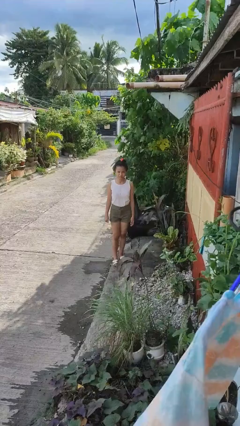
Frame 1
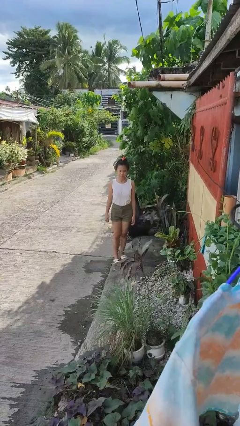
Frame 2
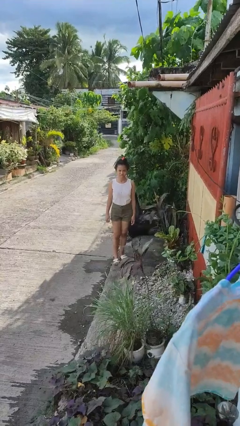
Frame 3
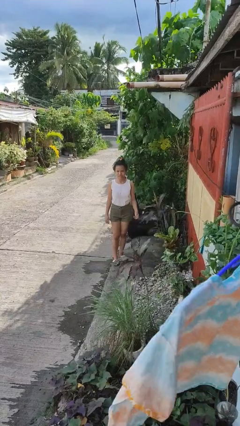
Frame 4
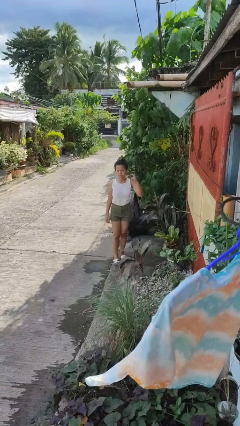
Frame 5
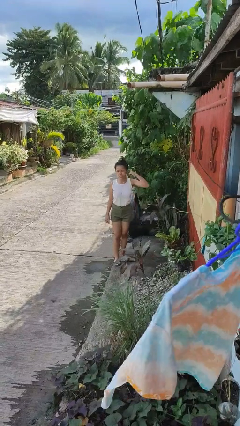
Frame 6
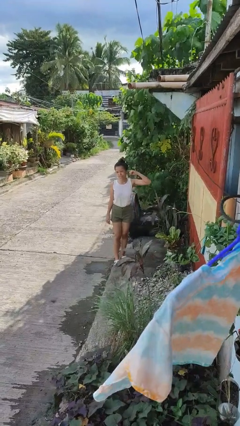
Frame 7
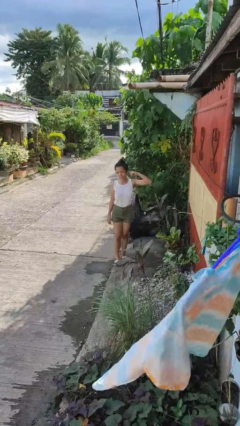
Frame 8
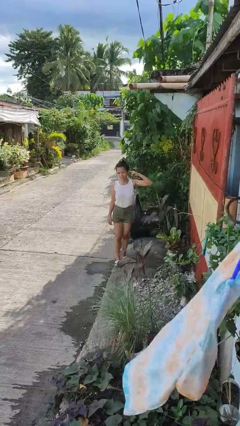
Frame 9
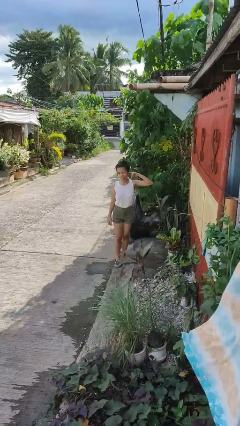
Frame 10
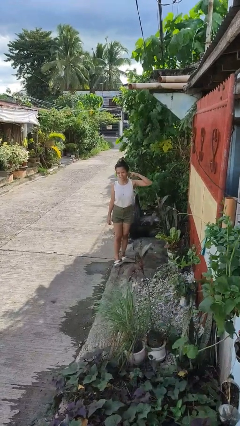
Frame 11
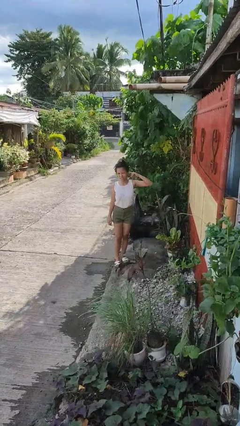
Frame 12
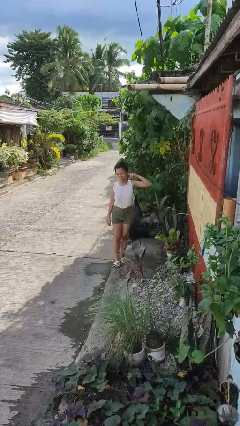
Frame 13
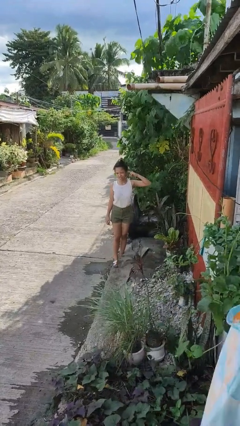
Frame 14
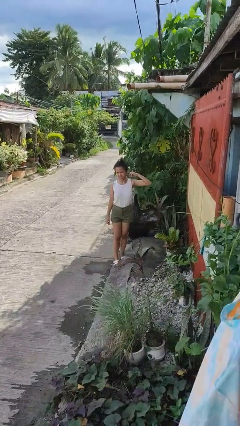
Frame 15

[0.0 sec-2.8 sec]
person touches earlobe

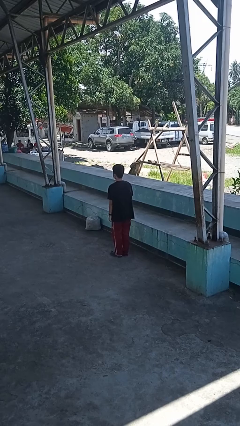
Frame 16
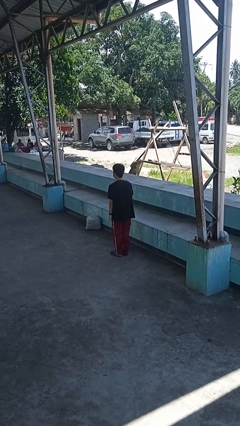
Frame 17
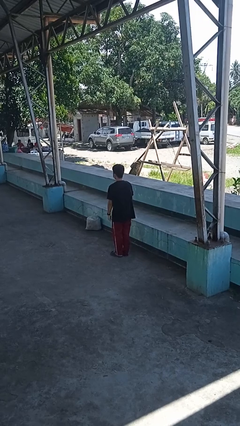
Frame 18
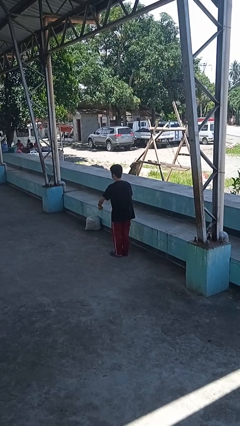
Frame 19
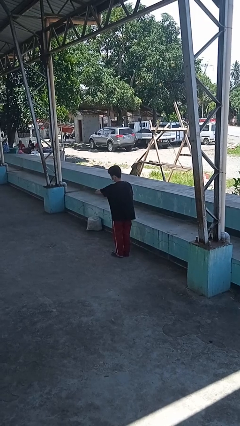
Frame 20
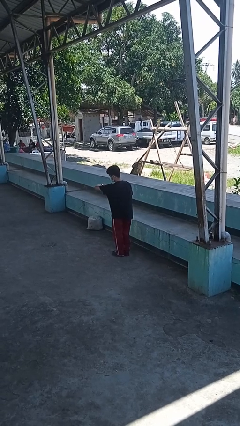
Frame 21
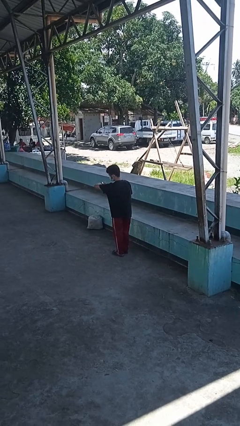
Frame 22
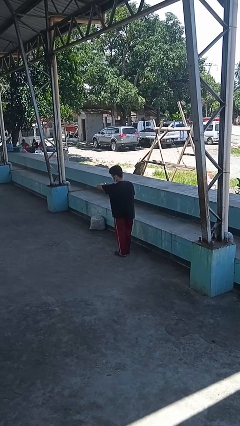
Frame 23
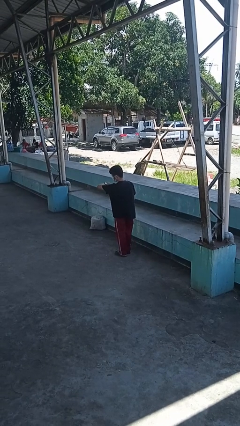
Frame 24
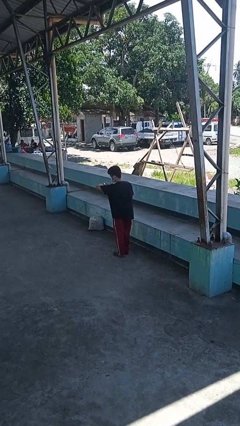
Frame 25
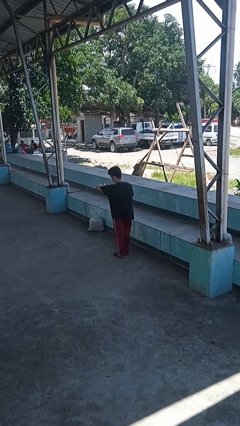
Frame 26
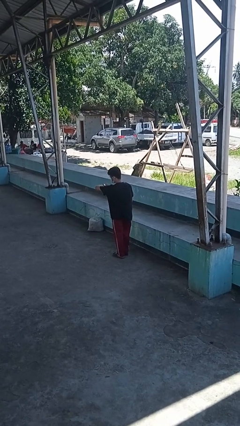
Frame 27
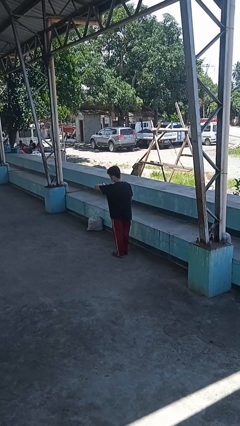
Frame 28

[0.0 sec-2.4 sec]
person looks at wristwatch

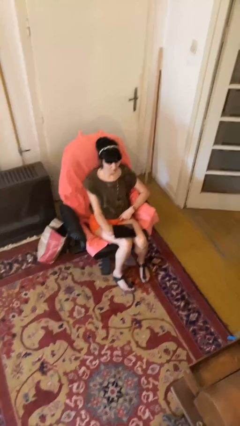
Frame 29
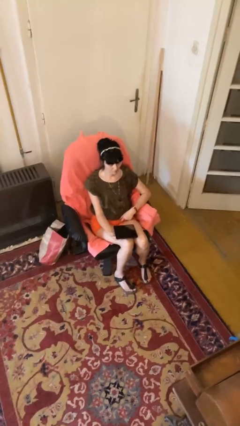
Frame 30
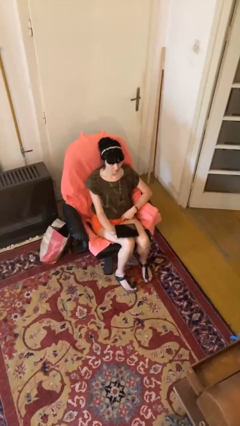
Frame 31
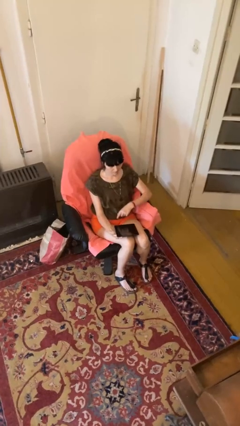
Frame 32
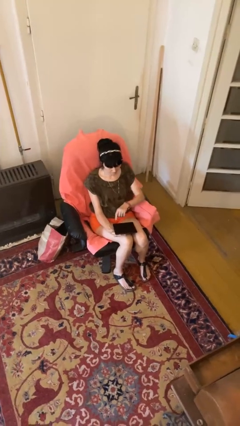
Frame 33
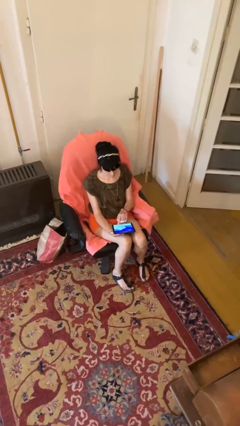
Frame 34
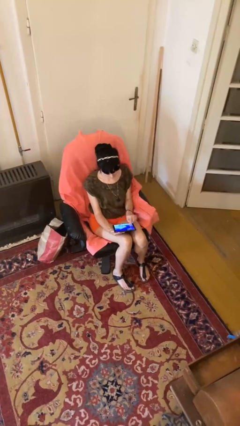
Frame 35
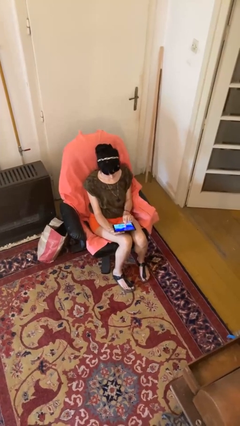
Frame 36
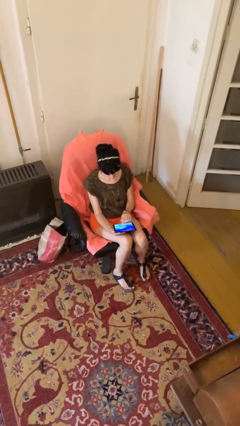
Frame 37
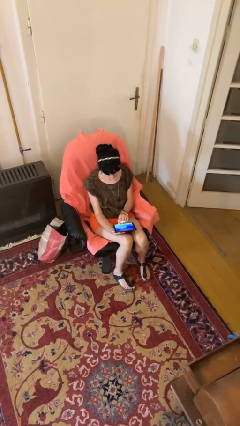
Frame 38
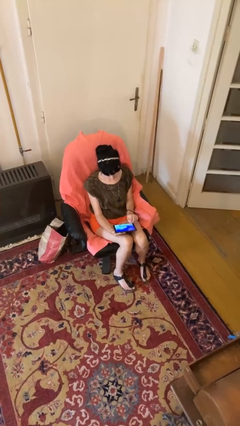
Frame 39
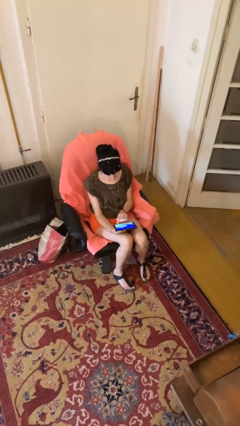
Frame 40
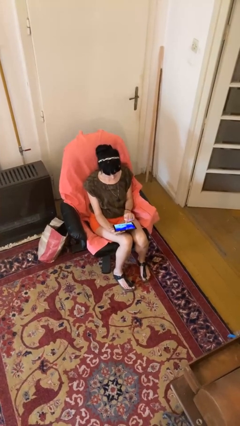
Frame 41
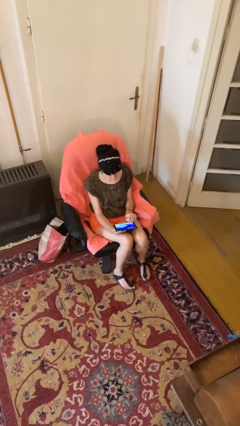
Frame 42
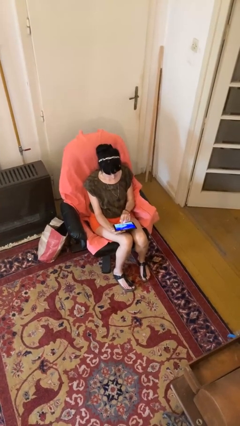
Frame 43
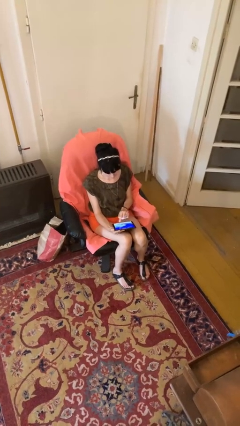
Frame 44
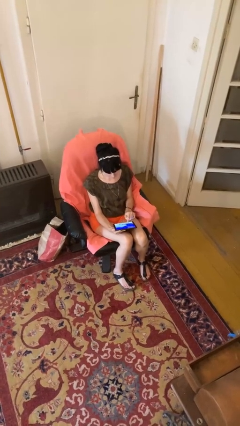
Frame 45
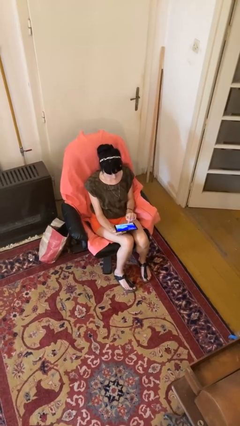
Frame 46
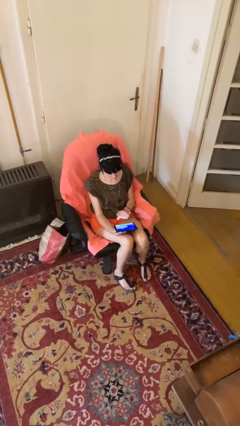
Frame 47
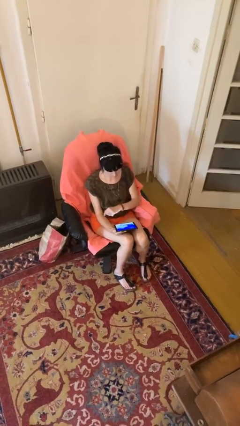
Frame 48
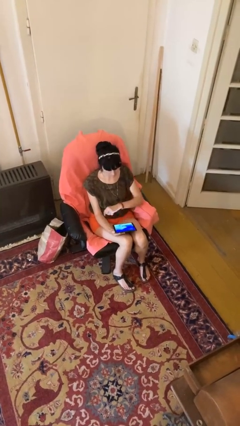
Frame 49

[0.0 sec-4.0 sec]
person interacts with tablet

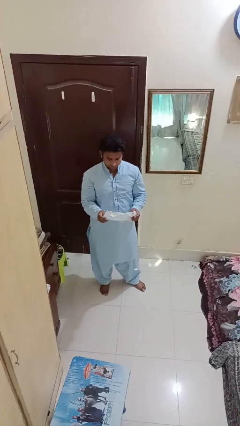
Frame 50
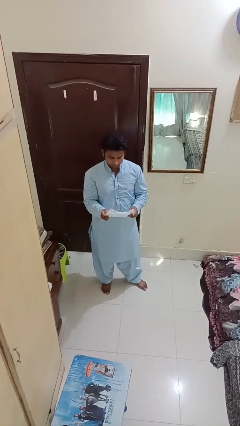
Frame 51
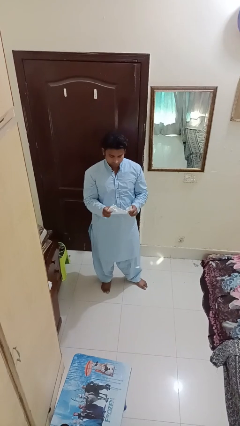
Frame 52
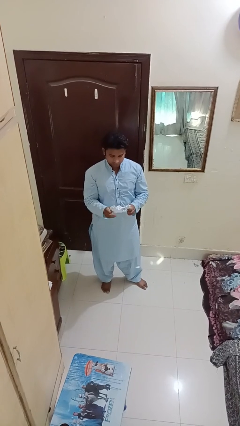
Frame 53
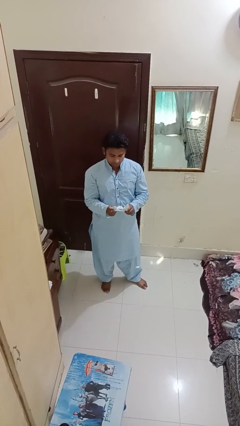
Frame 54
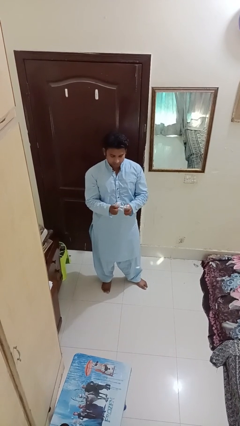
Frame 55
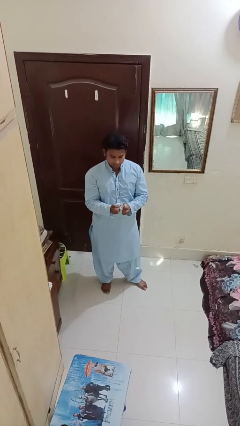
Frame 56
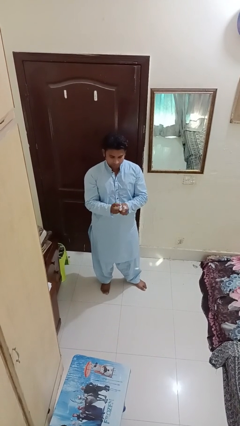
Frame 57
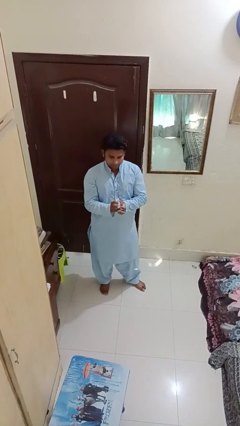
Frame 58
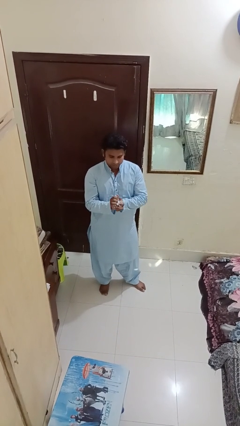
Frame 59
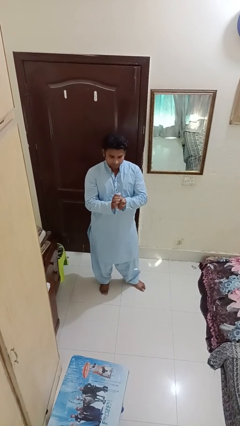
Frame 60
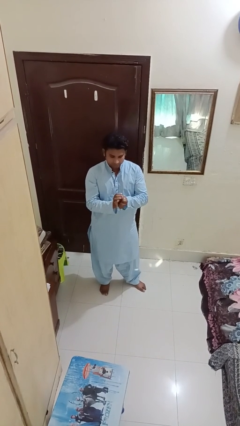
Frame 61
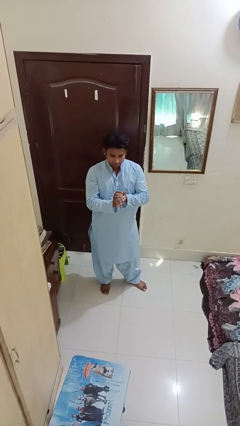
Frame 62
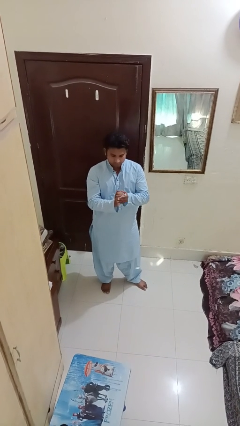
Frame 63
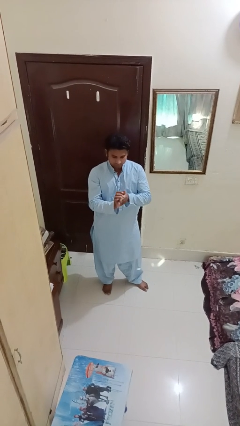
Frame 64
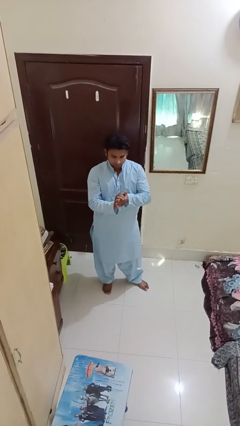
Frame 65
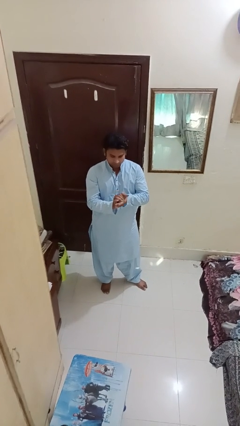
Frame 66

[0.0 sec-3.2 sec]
person crumples paper

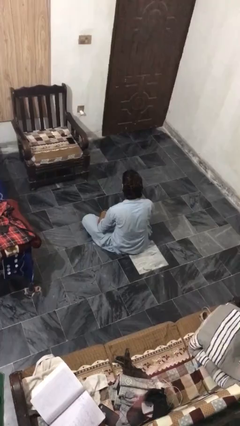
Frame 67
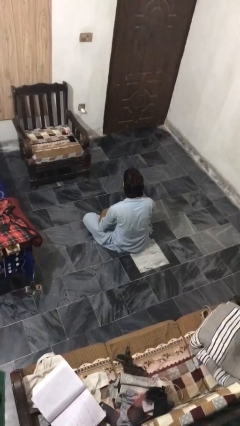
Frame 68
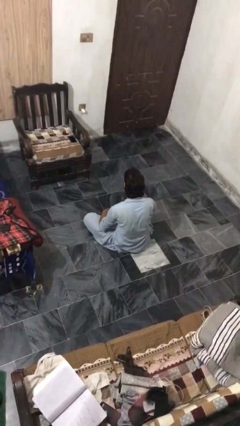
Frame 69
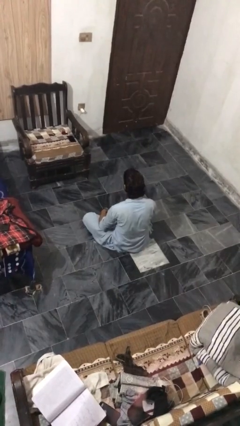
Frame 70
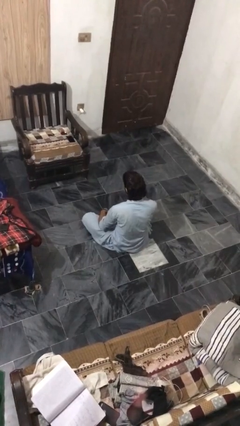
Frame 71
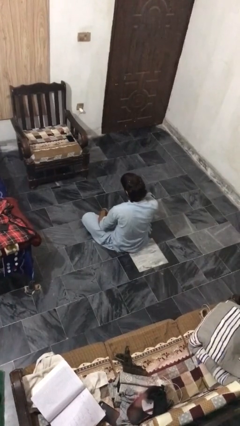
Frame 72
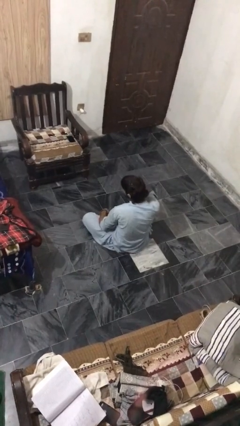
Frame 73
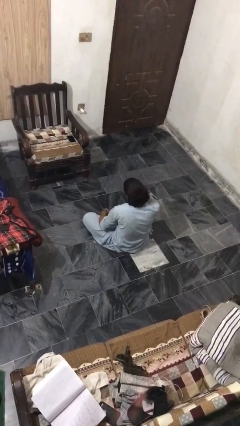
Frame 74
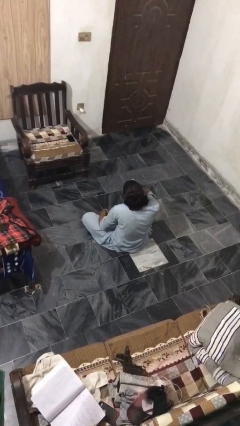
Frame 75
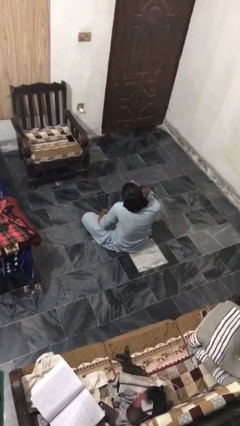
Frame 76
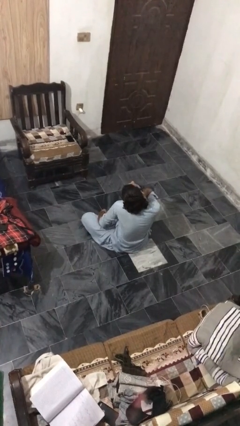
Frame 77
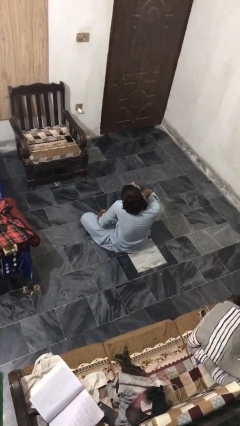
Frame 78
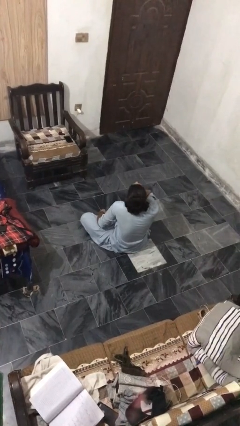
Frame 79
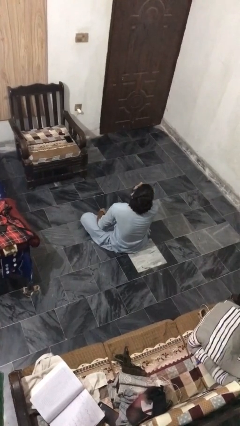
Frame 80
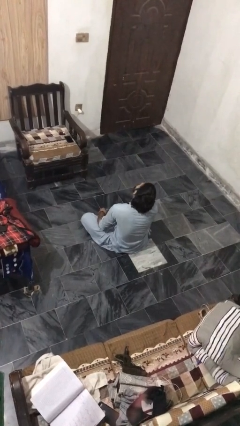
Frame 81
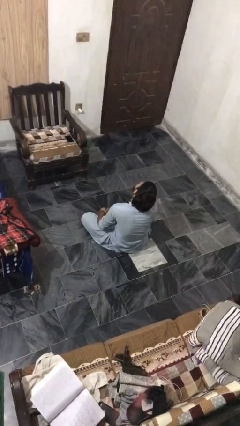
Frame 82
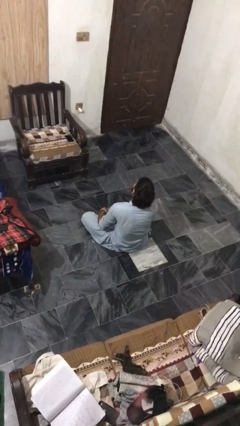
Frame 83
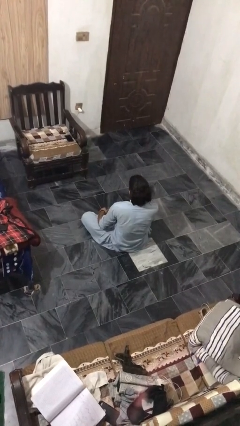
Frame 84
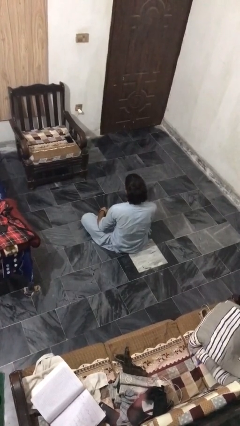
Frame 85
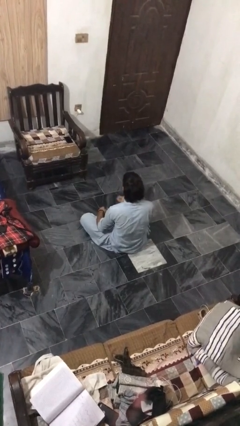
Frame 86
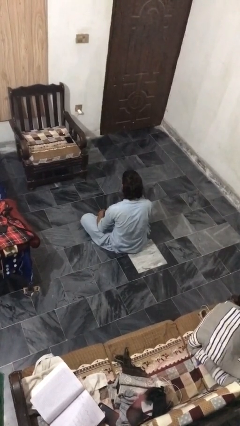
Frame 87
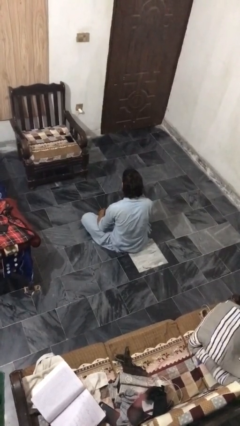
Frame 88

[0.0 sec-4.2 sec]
person rubs neck

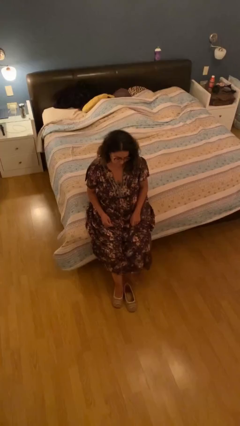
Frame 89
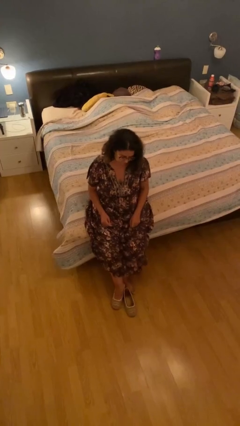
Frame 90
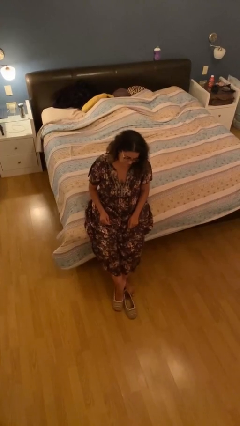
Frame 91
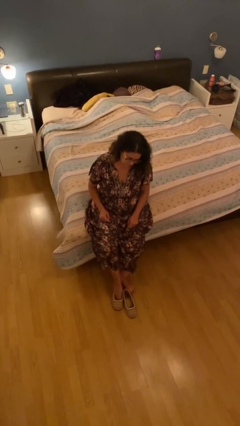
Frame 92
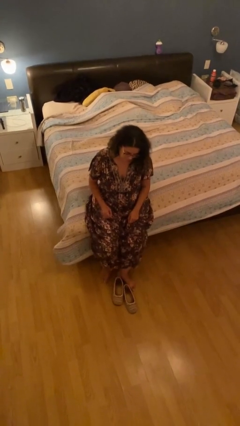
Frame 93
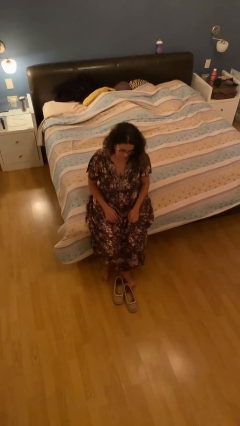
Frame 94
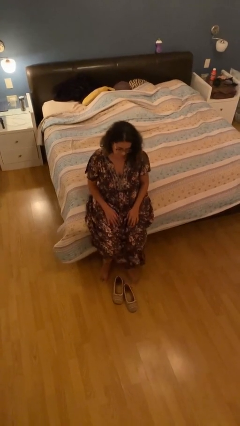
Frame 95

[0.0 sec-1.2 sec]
person takes off shoes
